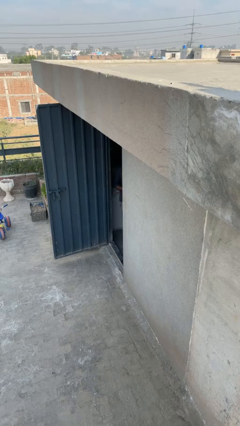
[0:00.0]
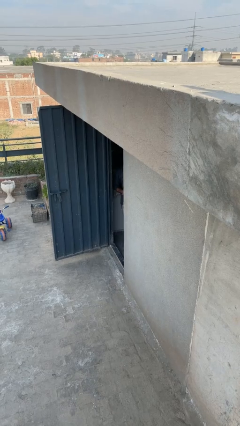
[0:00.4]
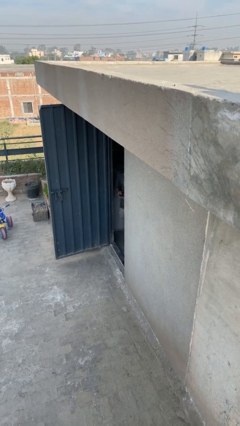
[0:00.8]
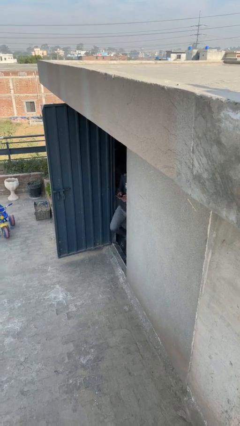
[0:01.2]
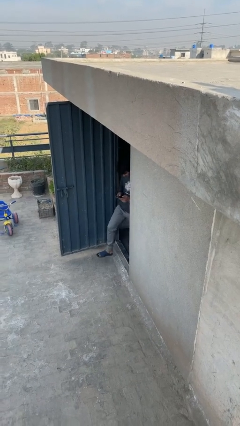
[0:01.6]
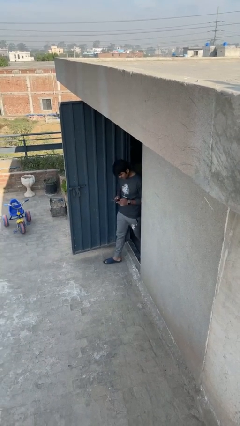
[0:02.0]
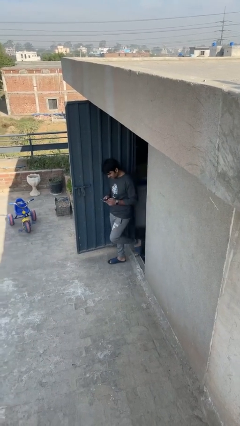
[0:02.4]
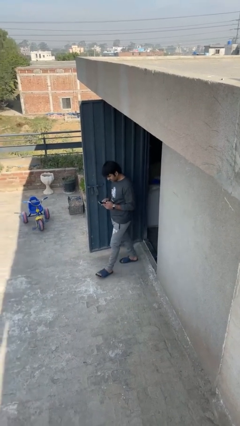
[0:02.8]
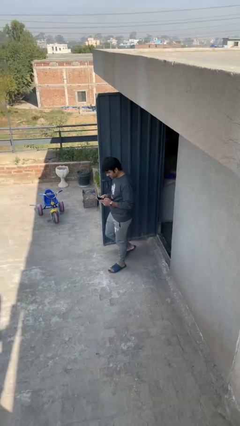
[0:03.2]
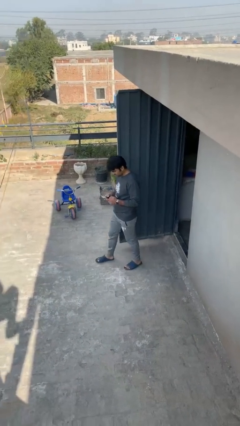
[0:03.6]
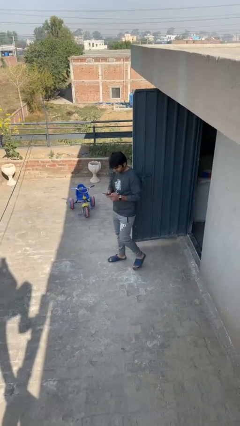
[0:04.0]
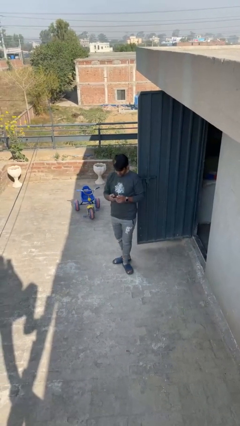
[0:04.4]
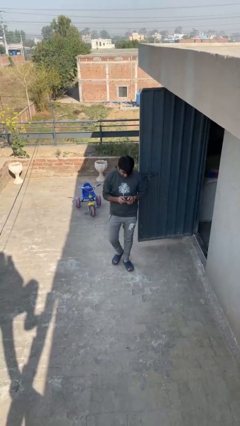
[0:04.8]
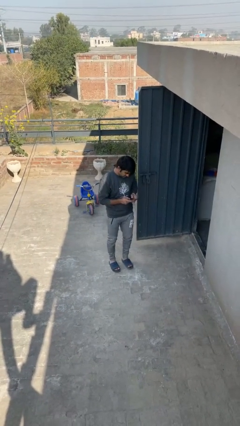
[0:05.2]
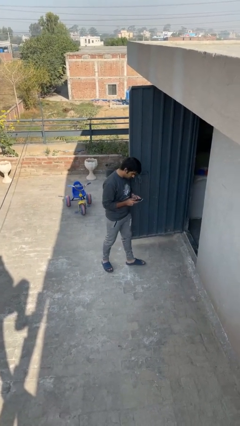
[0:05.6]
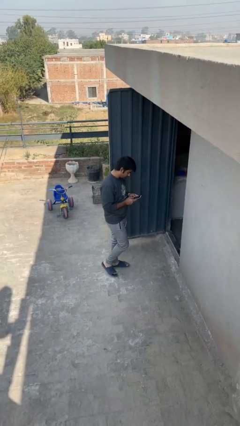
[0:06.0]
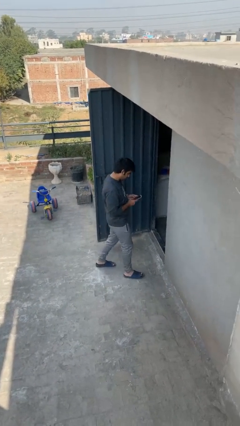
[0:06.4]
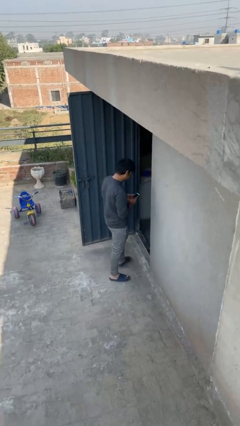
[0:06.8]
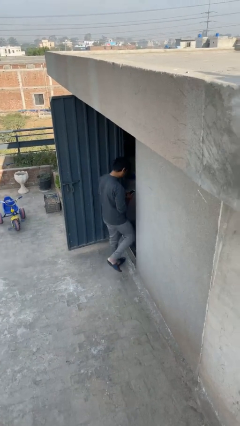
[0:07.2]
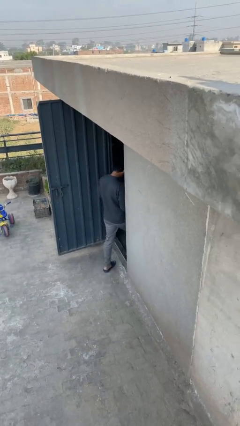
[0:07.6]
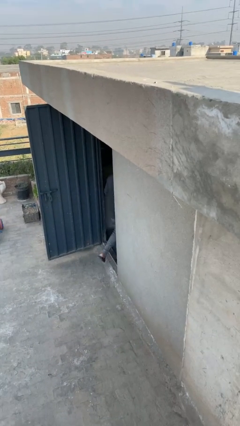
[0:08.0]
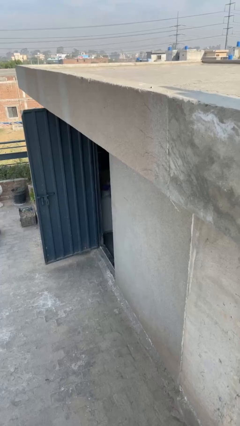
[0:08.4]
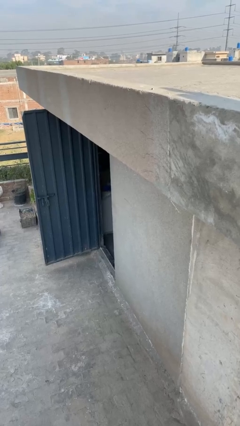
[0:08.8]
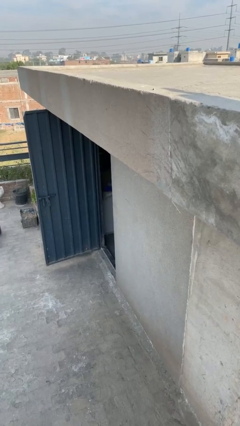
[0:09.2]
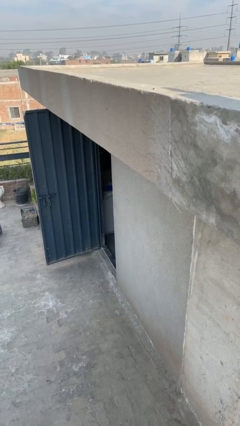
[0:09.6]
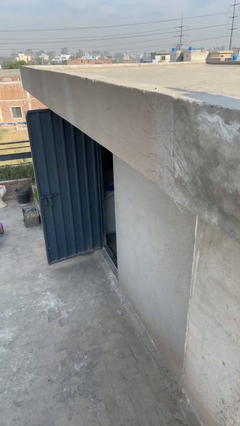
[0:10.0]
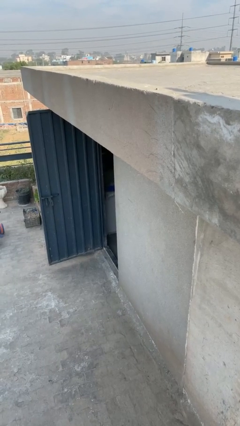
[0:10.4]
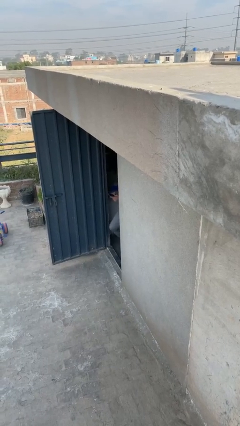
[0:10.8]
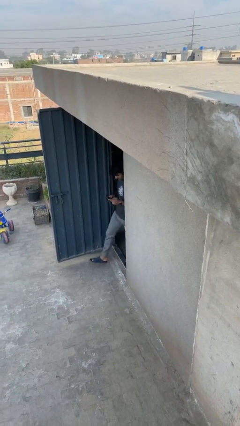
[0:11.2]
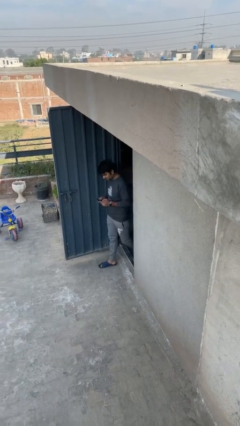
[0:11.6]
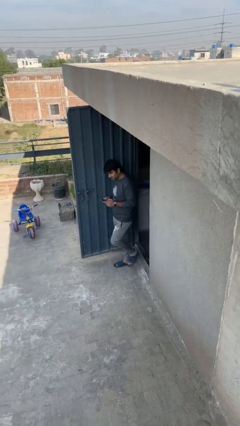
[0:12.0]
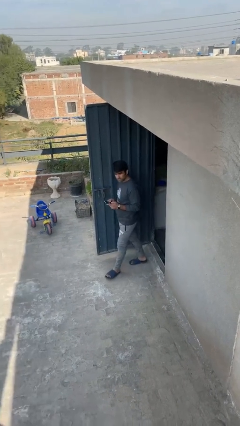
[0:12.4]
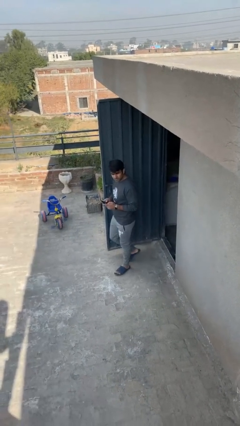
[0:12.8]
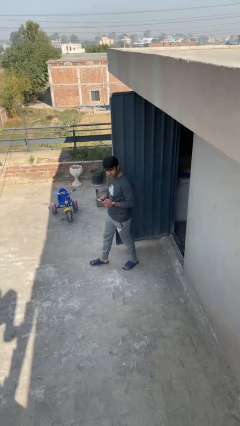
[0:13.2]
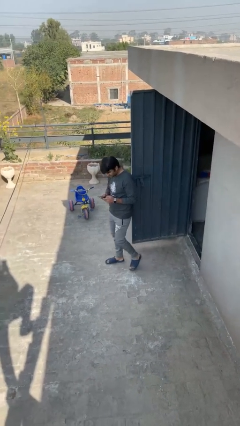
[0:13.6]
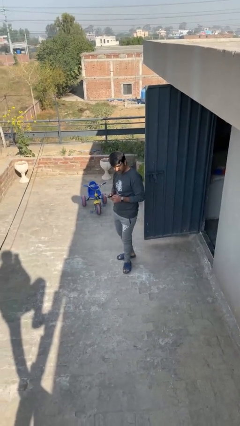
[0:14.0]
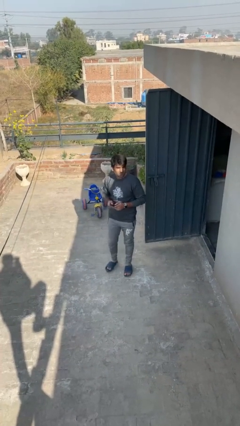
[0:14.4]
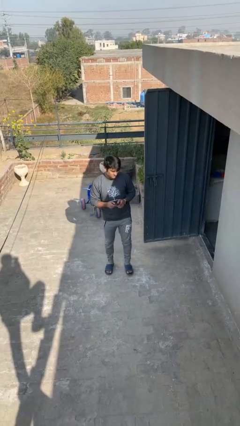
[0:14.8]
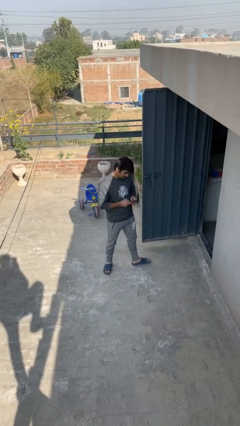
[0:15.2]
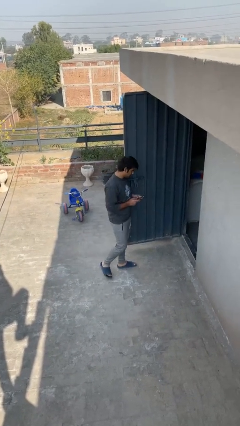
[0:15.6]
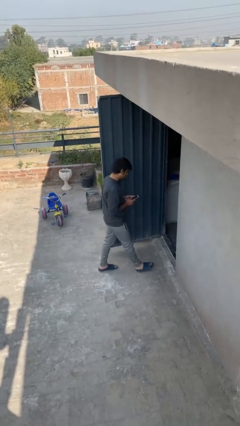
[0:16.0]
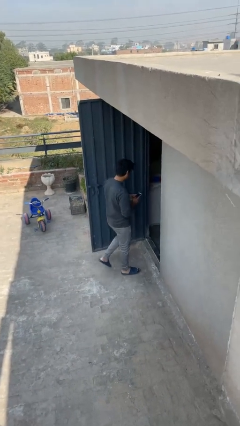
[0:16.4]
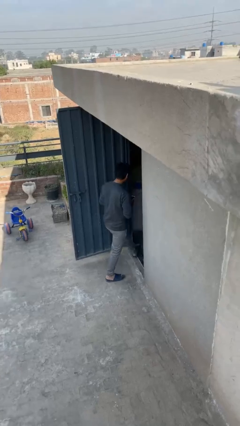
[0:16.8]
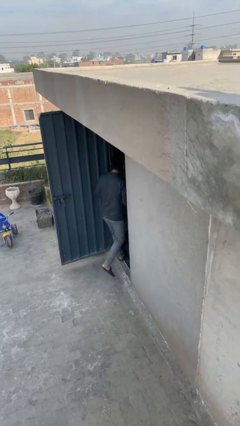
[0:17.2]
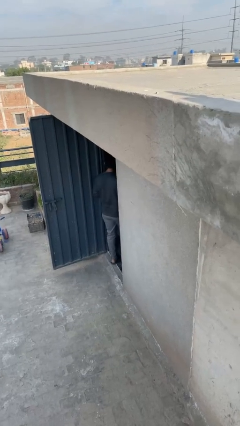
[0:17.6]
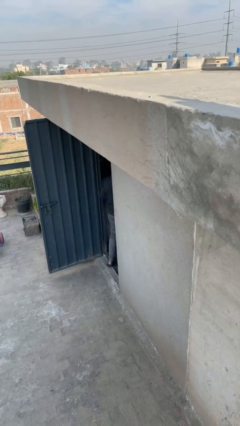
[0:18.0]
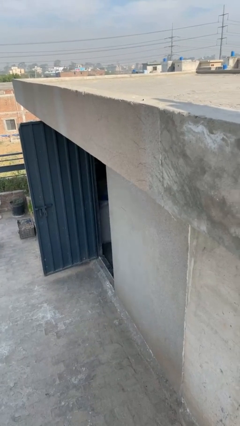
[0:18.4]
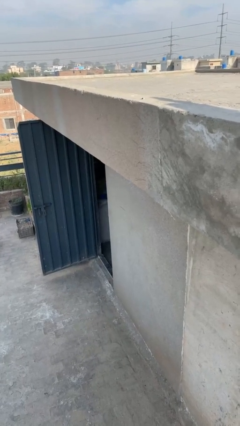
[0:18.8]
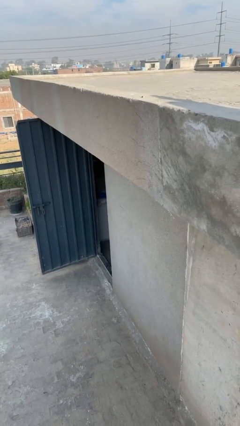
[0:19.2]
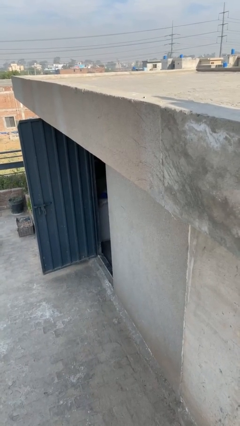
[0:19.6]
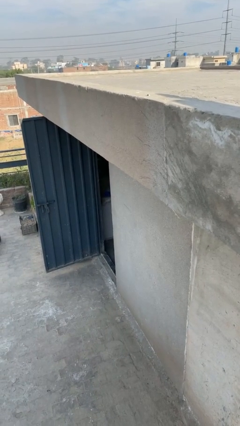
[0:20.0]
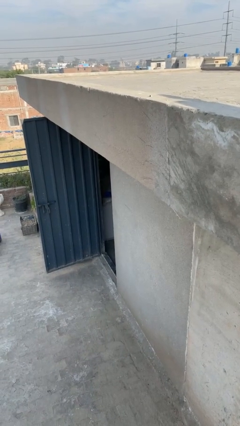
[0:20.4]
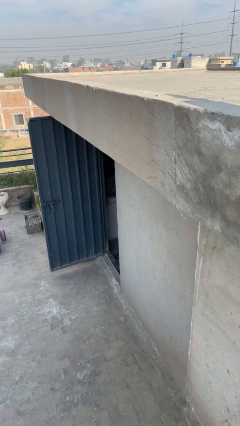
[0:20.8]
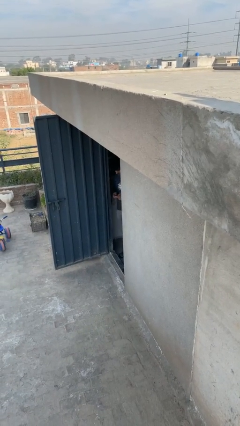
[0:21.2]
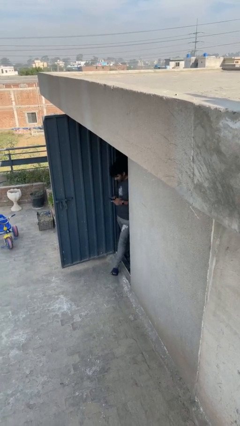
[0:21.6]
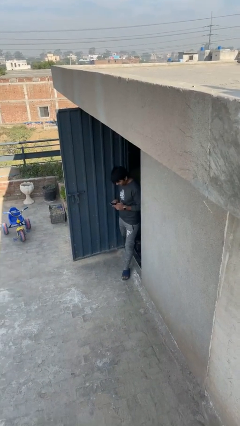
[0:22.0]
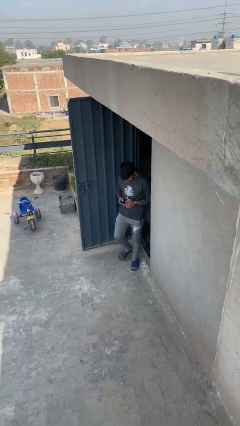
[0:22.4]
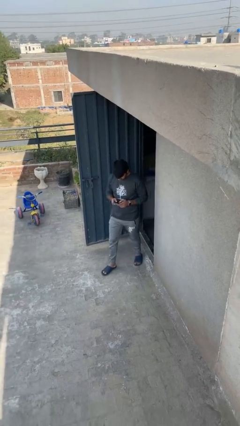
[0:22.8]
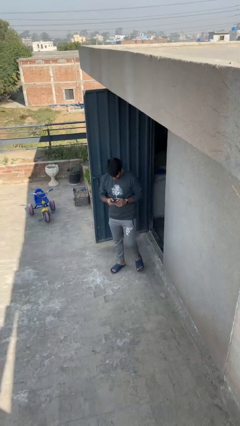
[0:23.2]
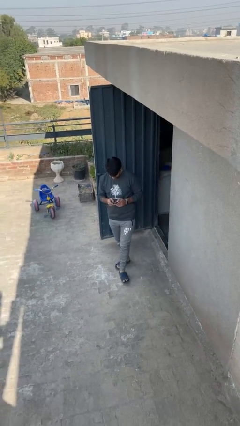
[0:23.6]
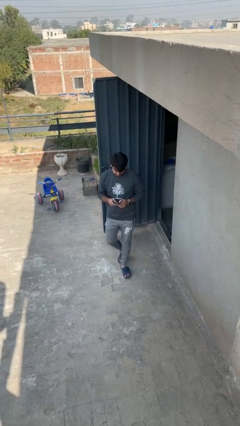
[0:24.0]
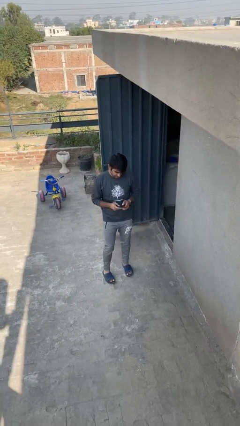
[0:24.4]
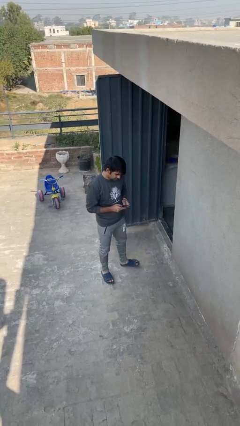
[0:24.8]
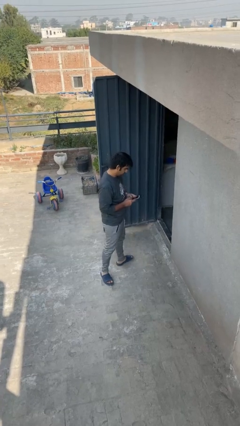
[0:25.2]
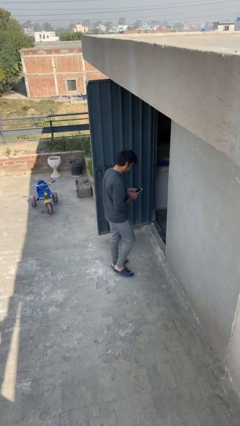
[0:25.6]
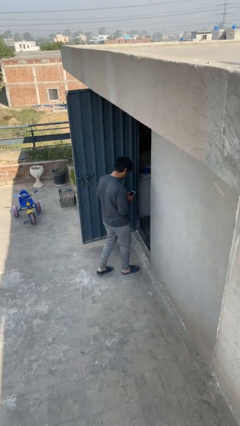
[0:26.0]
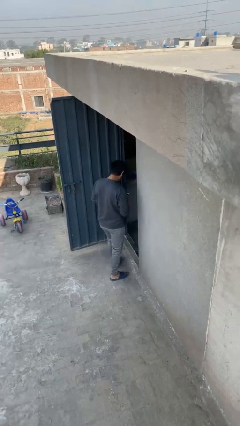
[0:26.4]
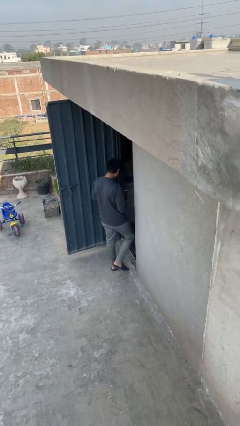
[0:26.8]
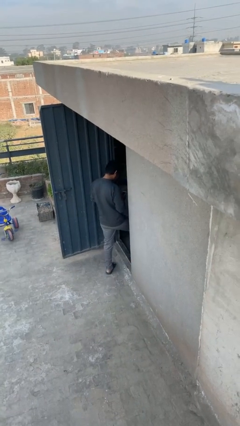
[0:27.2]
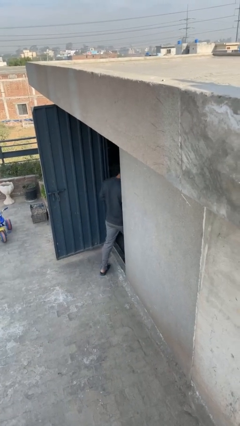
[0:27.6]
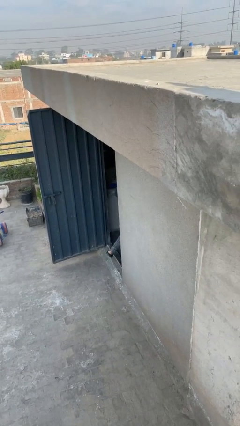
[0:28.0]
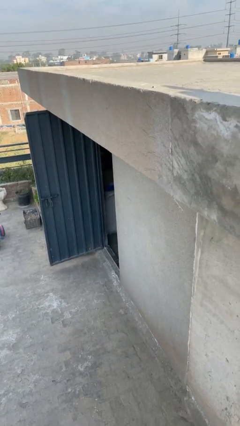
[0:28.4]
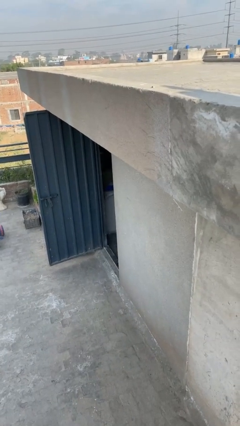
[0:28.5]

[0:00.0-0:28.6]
person texts on phone

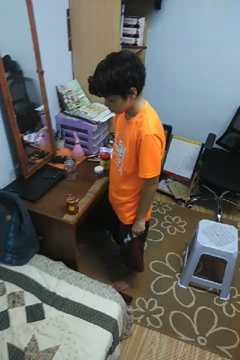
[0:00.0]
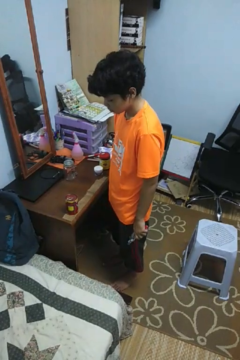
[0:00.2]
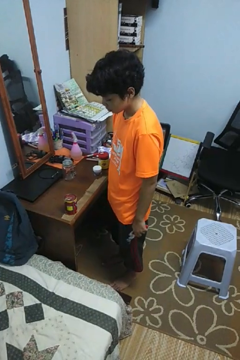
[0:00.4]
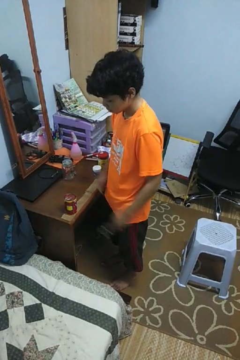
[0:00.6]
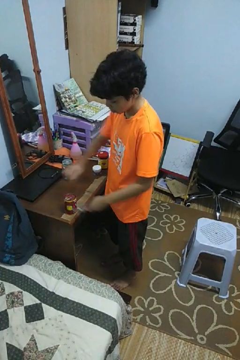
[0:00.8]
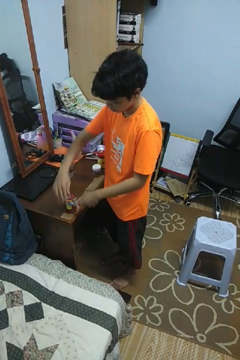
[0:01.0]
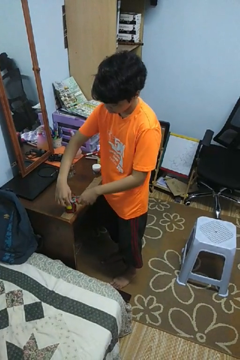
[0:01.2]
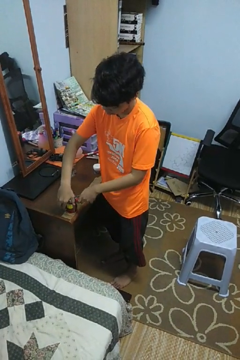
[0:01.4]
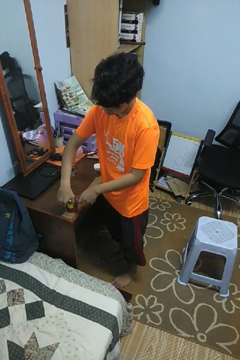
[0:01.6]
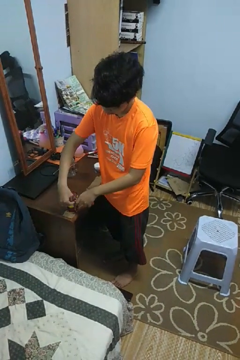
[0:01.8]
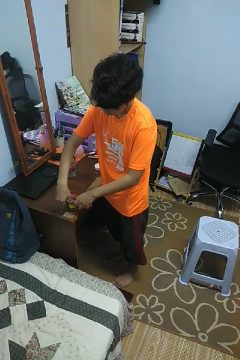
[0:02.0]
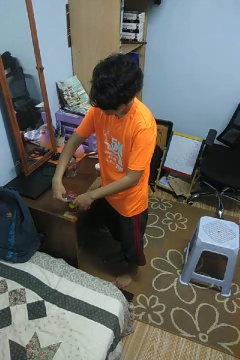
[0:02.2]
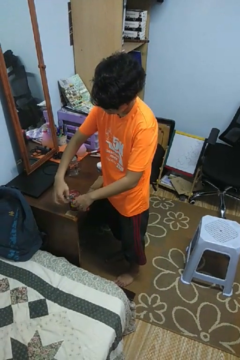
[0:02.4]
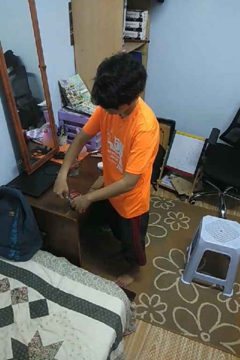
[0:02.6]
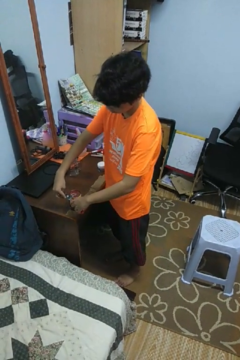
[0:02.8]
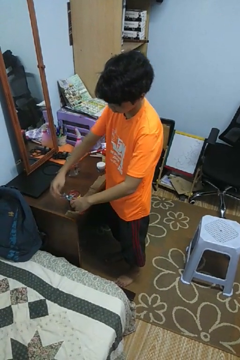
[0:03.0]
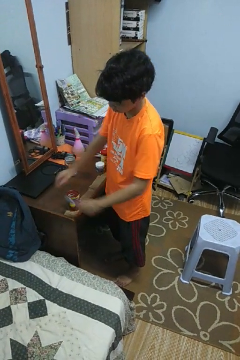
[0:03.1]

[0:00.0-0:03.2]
person opens can with can opener

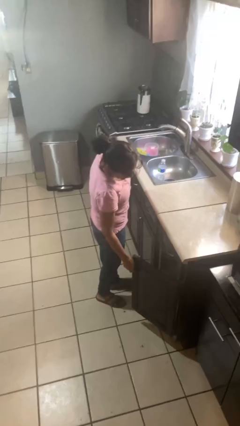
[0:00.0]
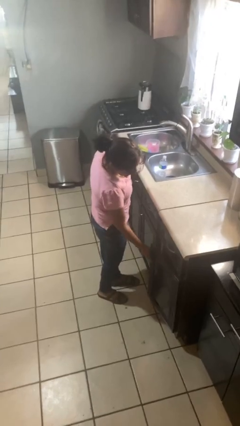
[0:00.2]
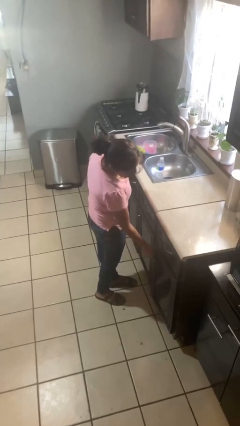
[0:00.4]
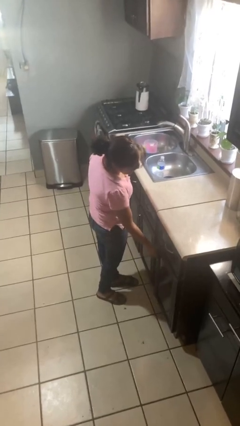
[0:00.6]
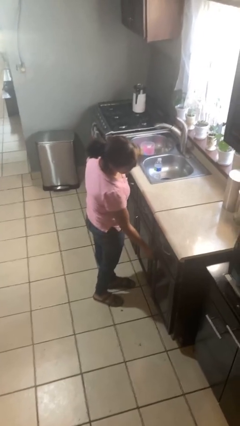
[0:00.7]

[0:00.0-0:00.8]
person closes cabinet

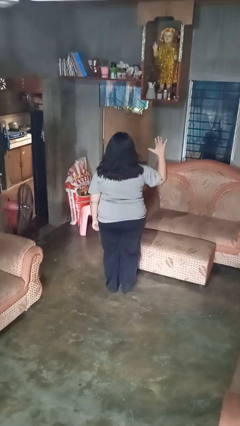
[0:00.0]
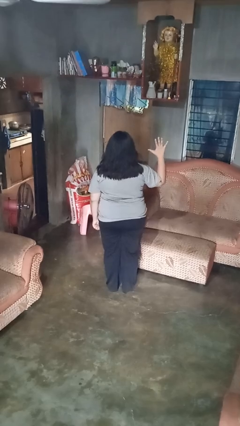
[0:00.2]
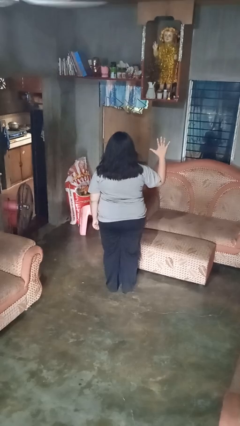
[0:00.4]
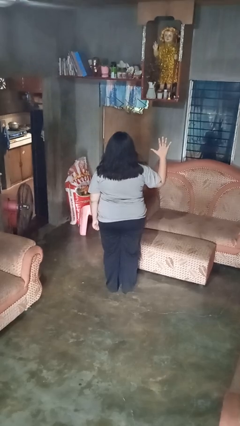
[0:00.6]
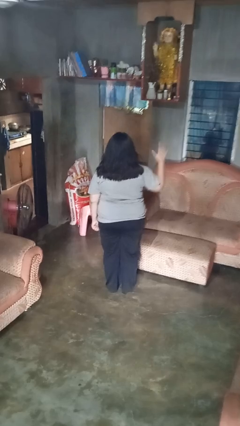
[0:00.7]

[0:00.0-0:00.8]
person gestures number five
